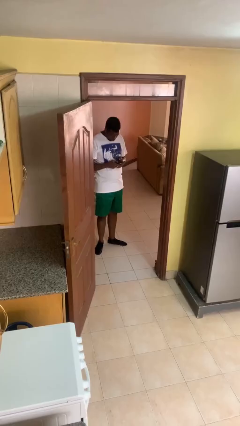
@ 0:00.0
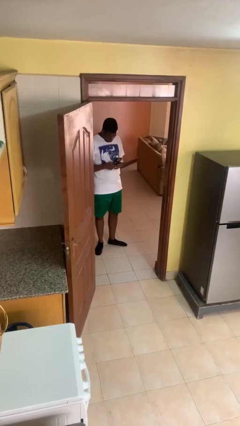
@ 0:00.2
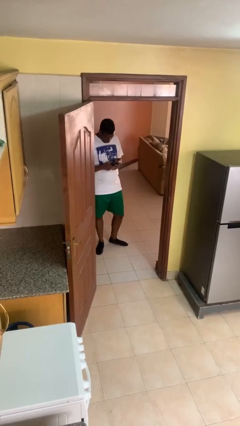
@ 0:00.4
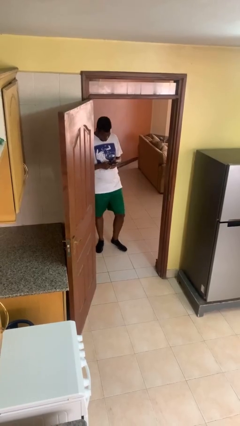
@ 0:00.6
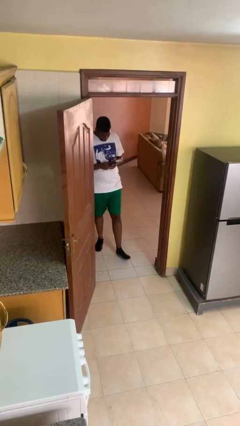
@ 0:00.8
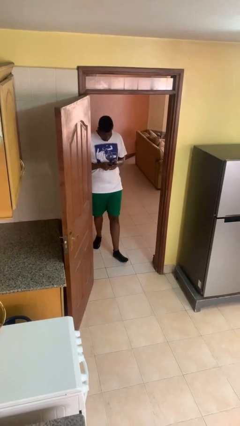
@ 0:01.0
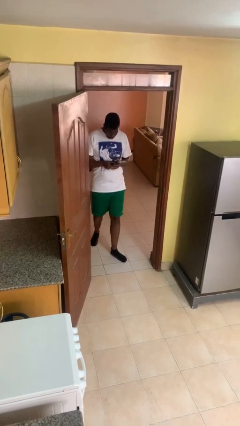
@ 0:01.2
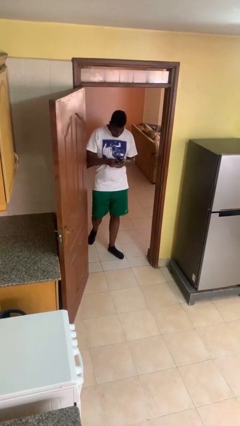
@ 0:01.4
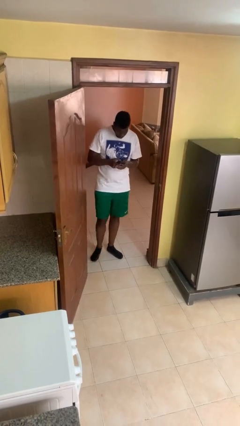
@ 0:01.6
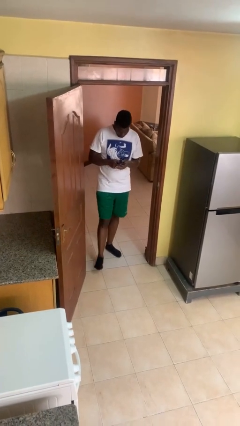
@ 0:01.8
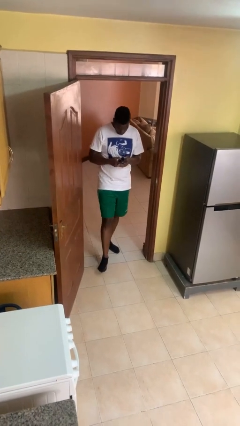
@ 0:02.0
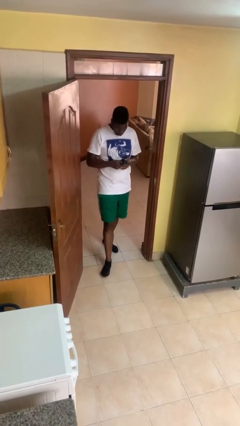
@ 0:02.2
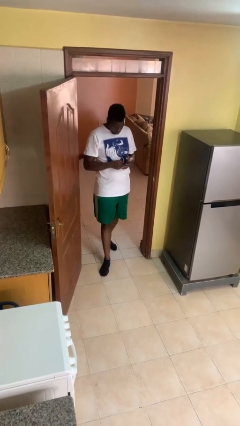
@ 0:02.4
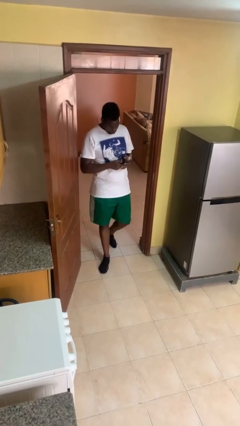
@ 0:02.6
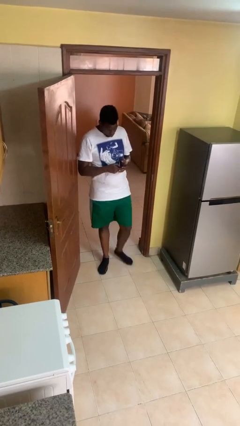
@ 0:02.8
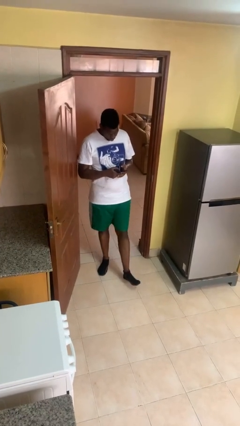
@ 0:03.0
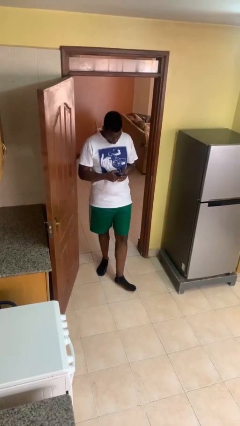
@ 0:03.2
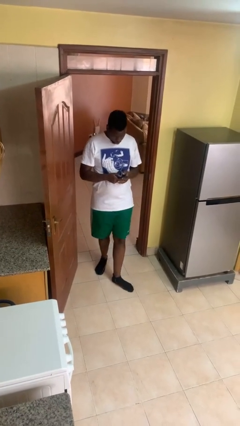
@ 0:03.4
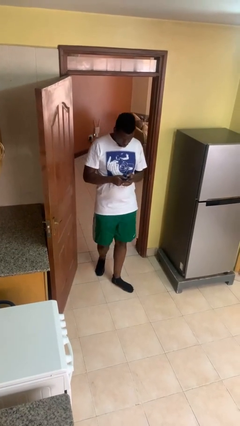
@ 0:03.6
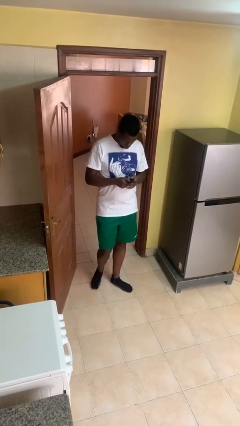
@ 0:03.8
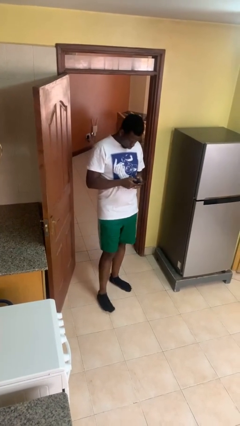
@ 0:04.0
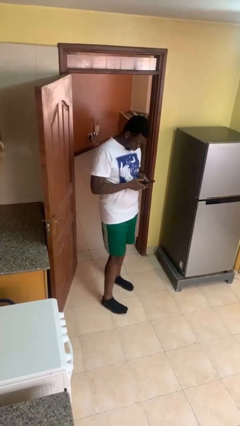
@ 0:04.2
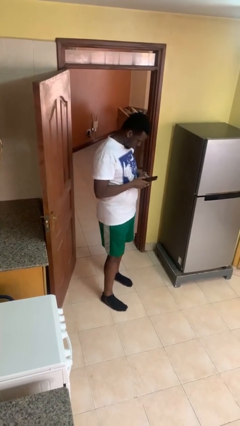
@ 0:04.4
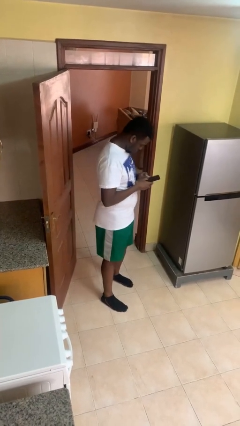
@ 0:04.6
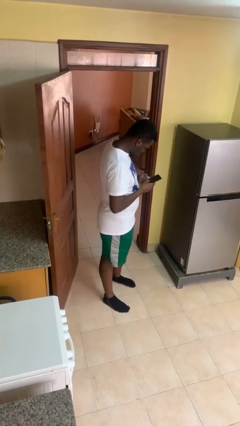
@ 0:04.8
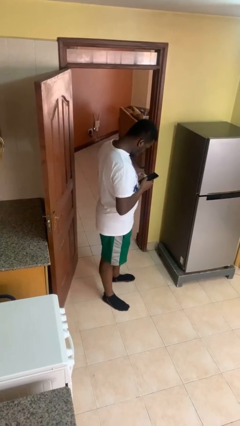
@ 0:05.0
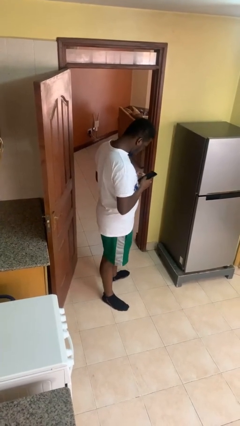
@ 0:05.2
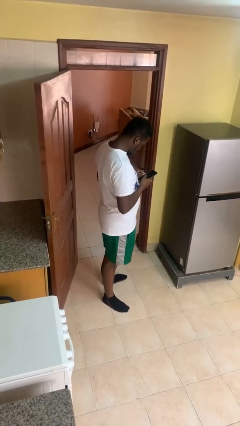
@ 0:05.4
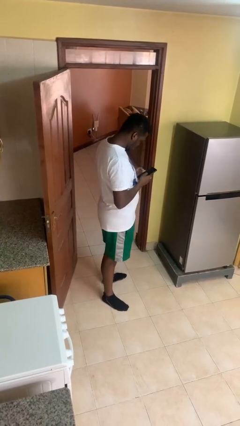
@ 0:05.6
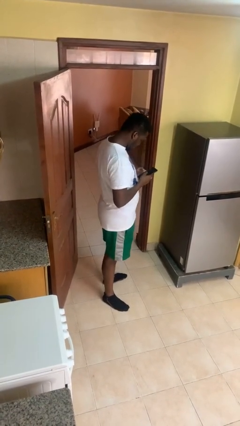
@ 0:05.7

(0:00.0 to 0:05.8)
person enters scene through structure

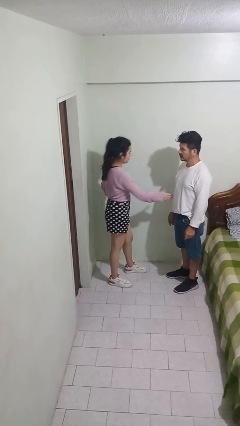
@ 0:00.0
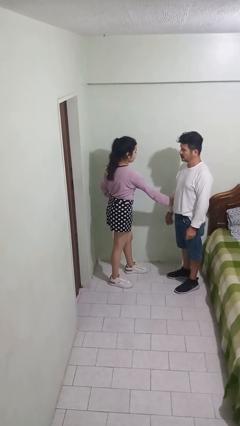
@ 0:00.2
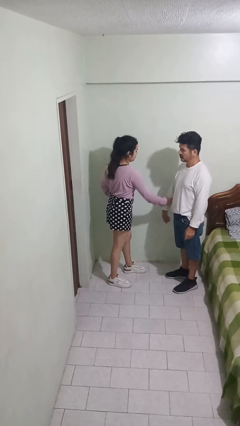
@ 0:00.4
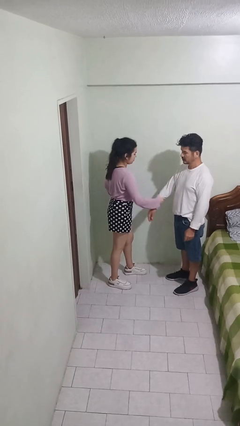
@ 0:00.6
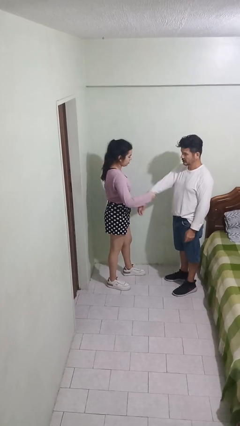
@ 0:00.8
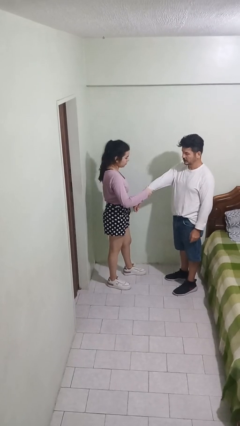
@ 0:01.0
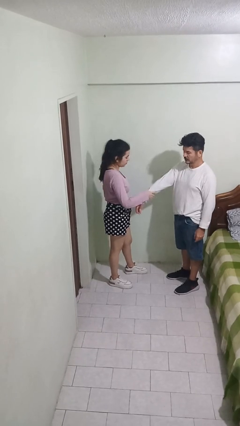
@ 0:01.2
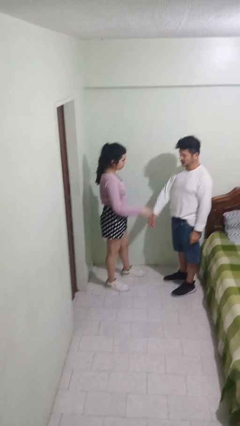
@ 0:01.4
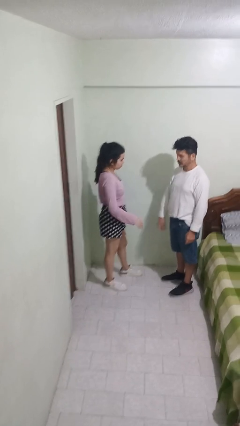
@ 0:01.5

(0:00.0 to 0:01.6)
person grabs person by forearm

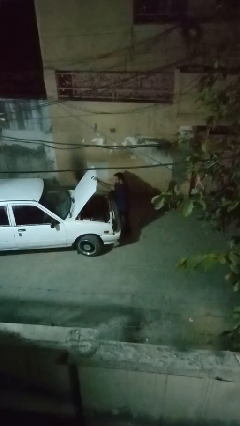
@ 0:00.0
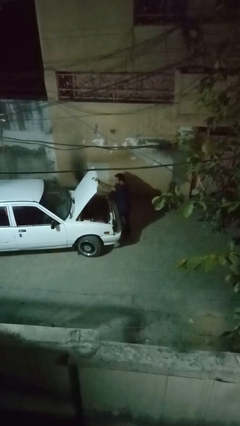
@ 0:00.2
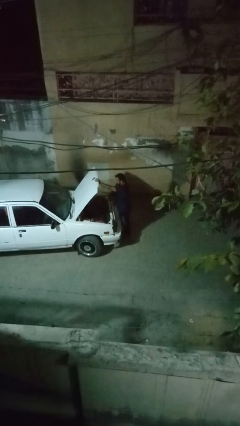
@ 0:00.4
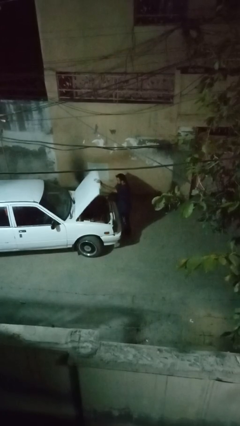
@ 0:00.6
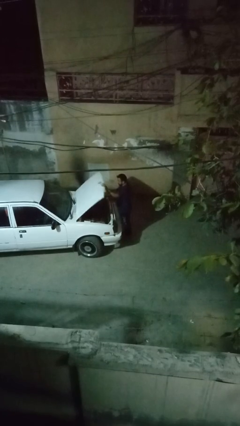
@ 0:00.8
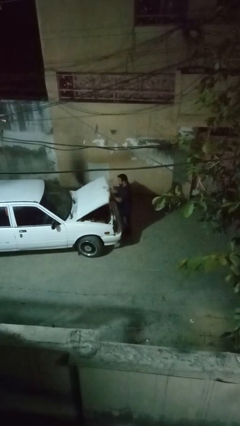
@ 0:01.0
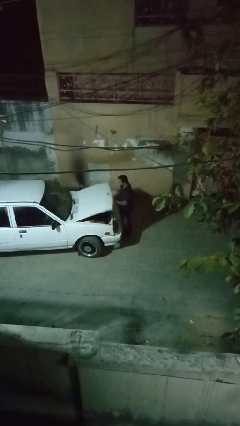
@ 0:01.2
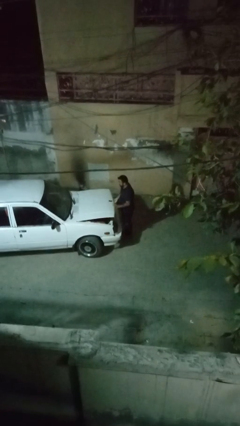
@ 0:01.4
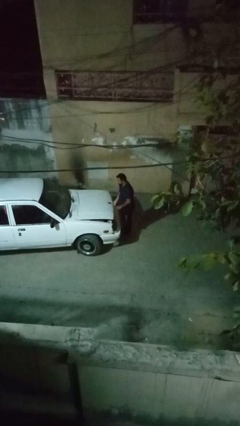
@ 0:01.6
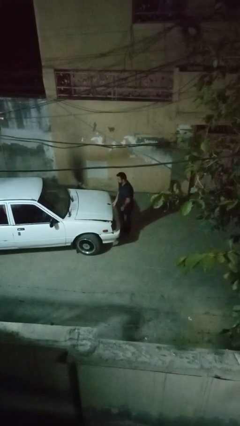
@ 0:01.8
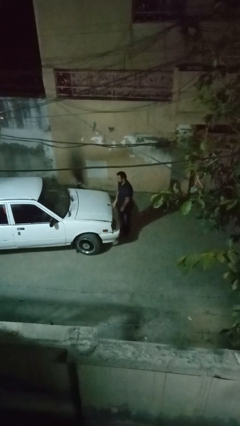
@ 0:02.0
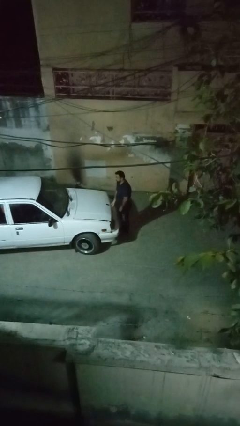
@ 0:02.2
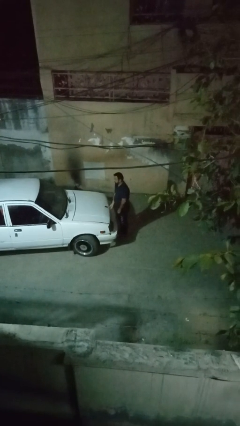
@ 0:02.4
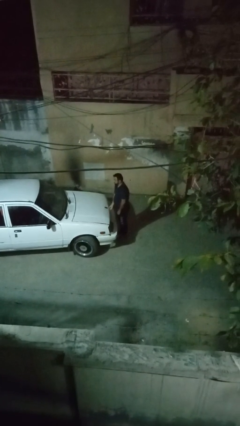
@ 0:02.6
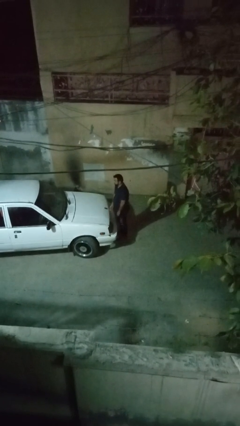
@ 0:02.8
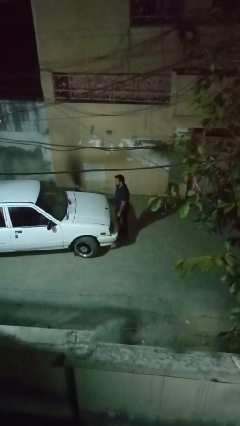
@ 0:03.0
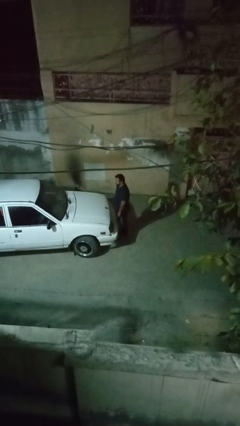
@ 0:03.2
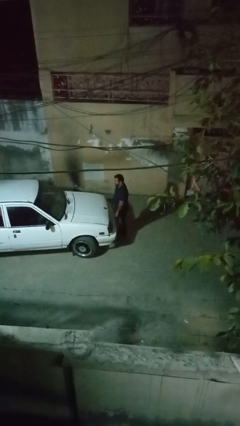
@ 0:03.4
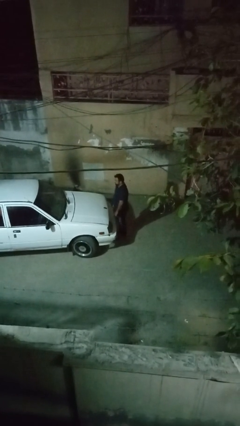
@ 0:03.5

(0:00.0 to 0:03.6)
person closes car hood

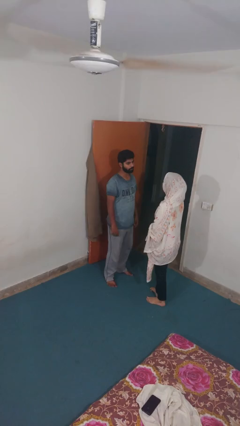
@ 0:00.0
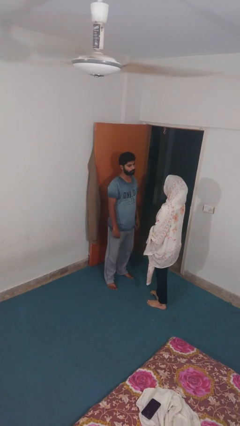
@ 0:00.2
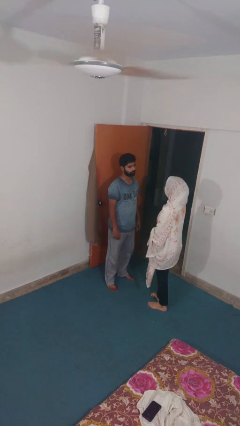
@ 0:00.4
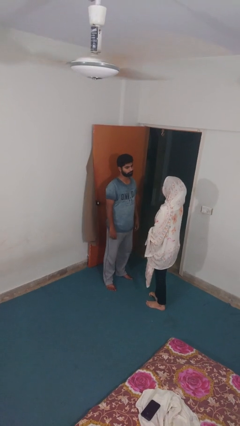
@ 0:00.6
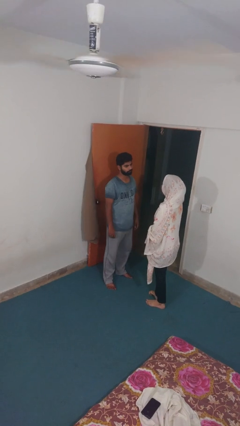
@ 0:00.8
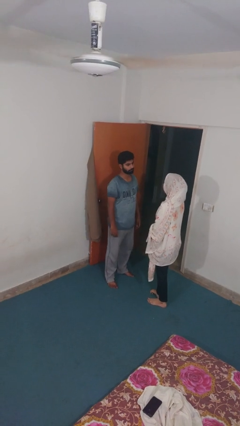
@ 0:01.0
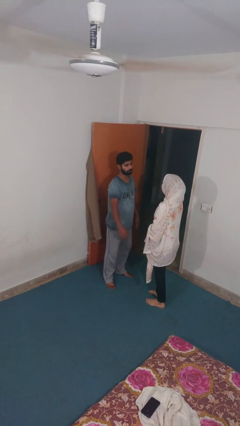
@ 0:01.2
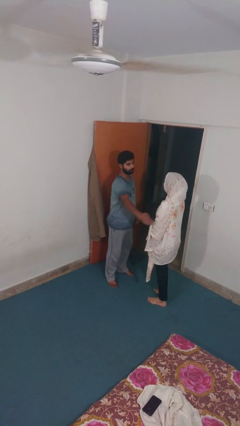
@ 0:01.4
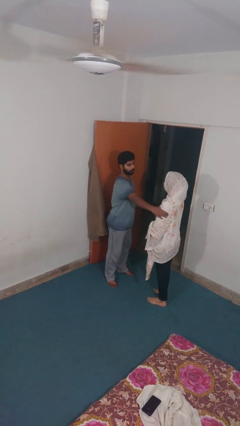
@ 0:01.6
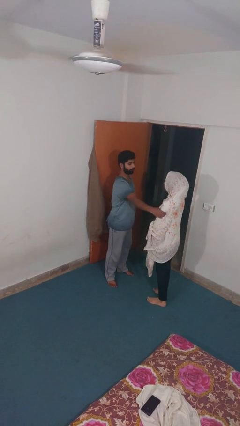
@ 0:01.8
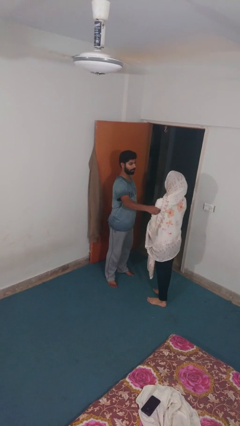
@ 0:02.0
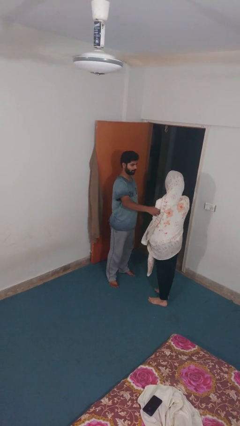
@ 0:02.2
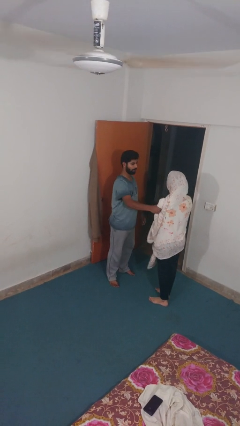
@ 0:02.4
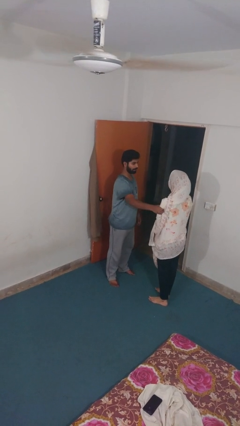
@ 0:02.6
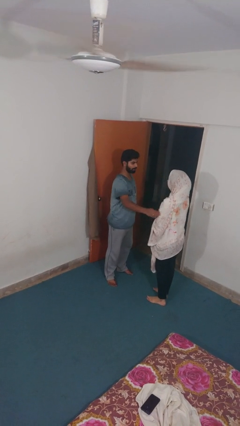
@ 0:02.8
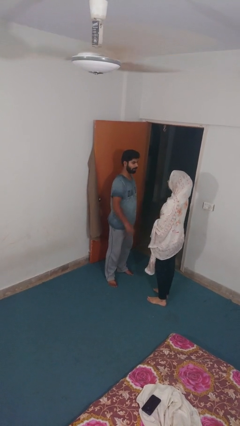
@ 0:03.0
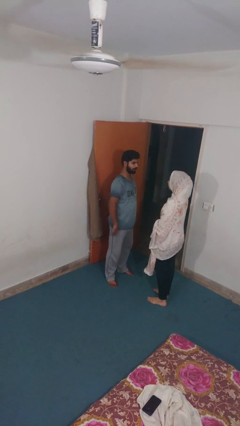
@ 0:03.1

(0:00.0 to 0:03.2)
person grabs person by bicep

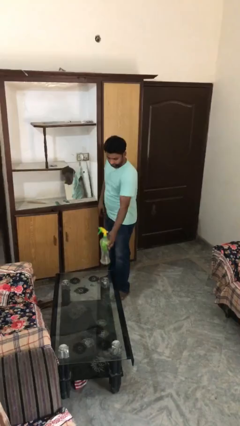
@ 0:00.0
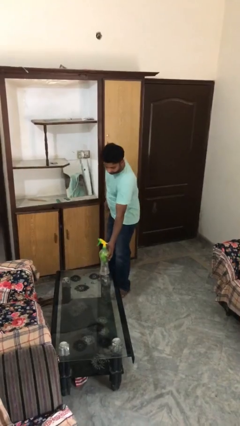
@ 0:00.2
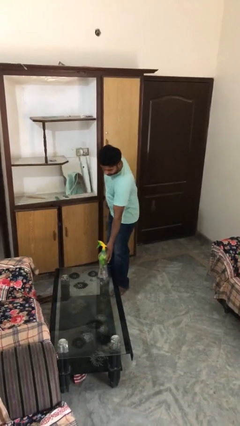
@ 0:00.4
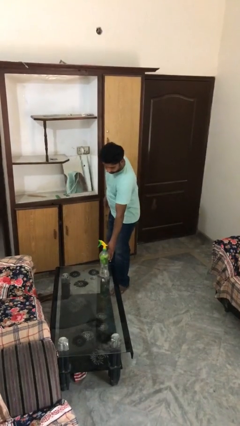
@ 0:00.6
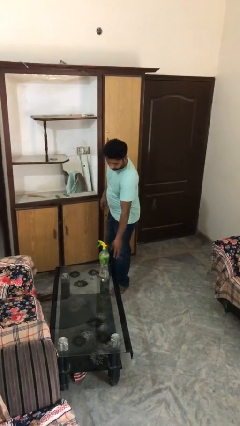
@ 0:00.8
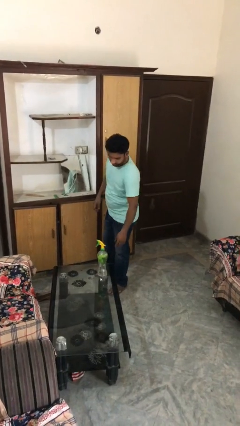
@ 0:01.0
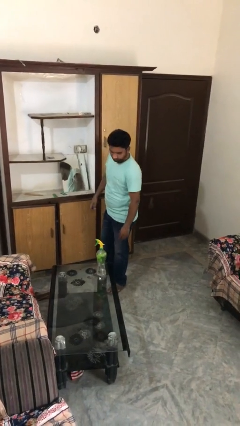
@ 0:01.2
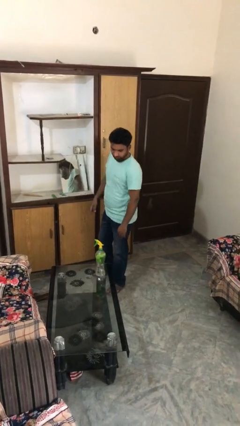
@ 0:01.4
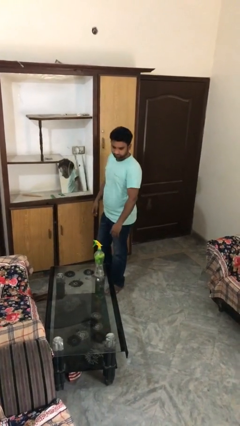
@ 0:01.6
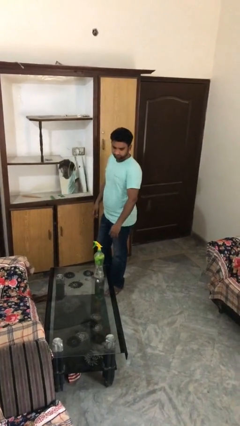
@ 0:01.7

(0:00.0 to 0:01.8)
person puts down object on table

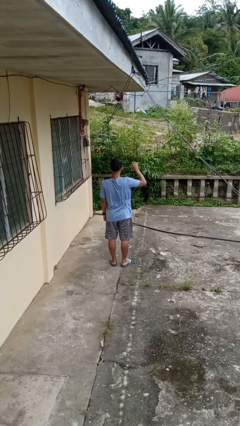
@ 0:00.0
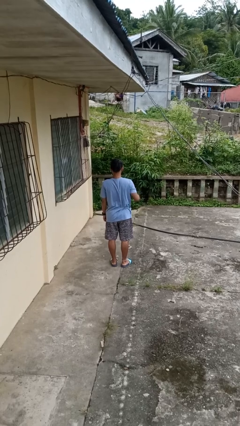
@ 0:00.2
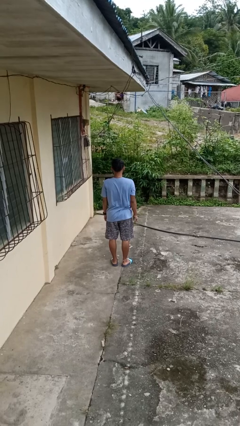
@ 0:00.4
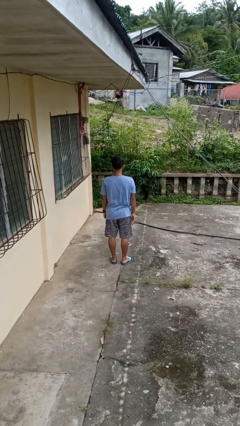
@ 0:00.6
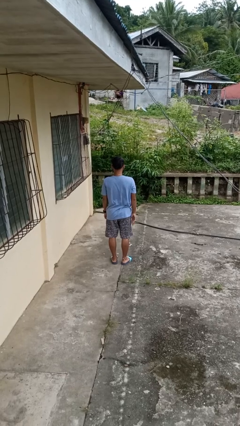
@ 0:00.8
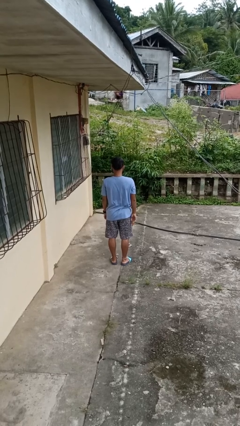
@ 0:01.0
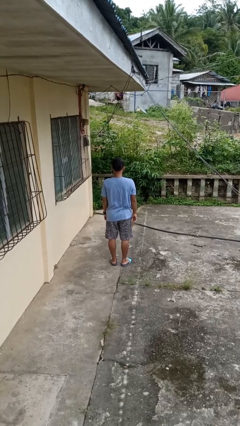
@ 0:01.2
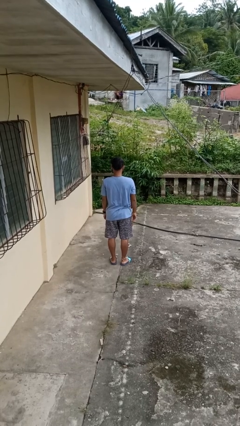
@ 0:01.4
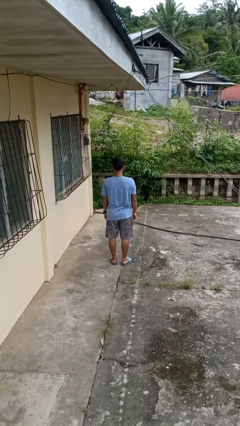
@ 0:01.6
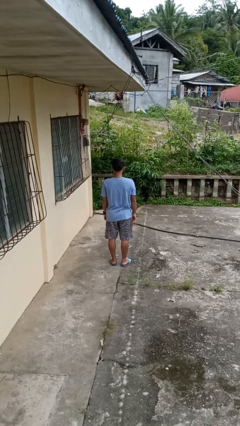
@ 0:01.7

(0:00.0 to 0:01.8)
person gestures lower hand
